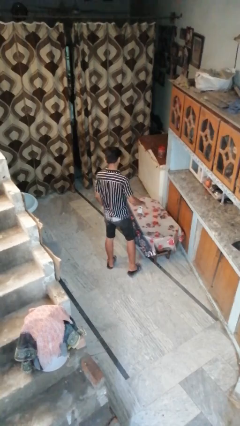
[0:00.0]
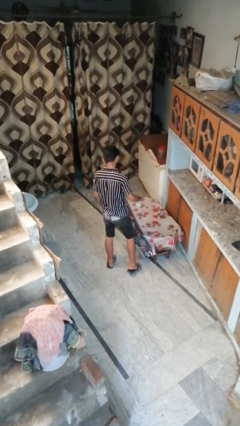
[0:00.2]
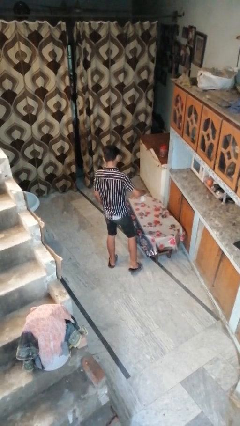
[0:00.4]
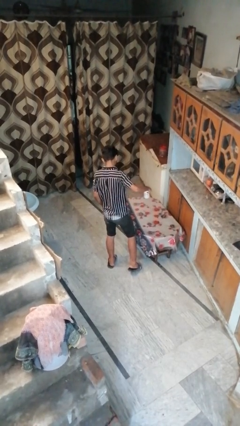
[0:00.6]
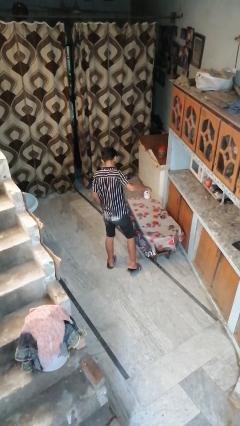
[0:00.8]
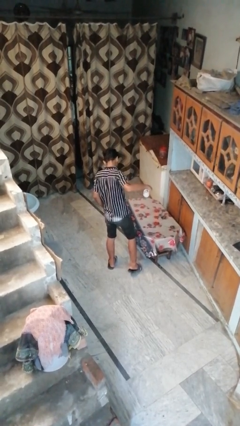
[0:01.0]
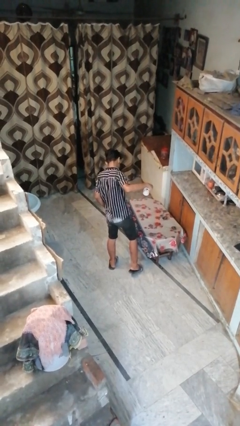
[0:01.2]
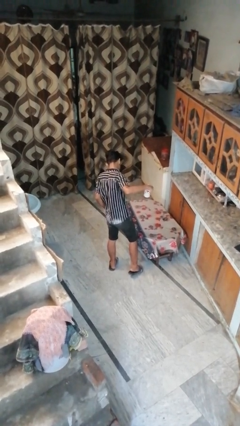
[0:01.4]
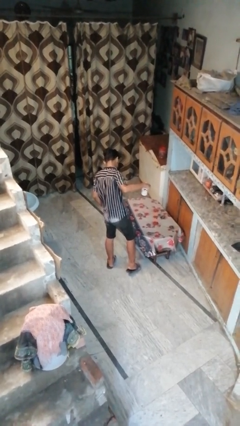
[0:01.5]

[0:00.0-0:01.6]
person sprays from bottle

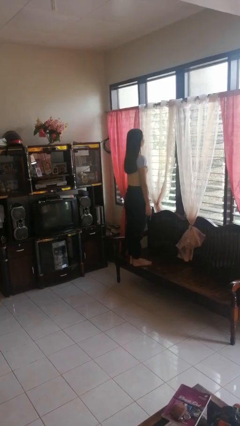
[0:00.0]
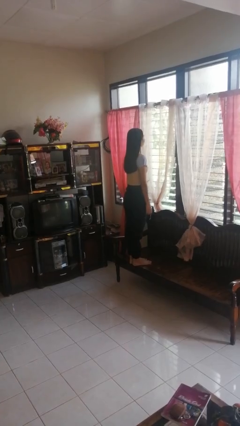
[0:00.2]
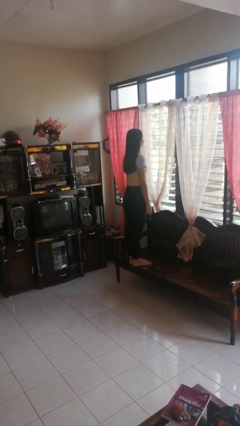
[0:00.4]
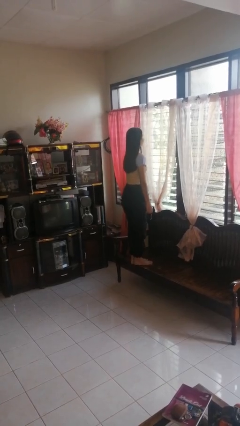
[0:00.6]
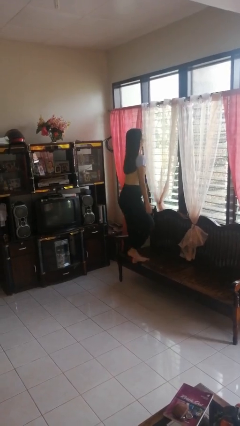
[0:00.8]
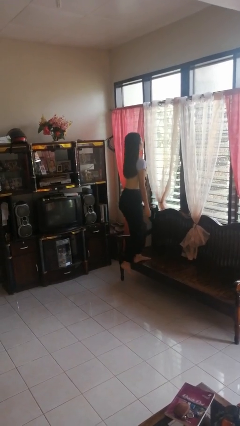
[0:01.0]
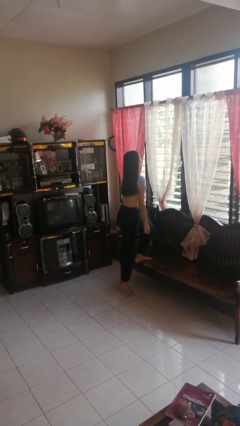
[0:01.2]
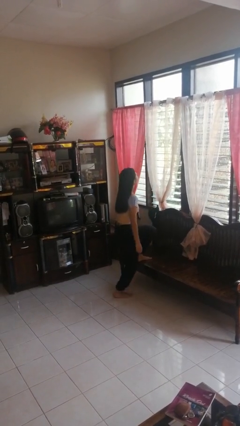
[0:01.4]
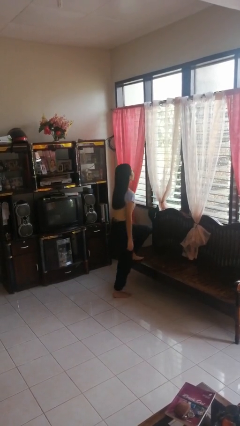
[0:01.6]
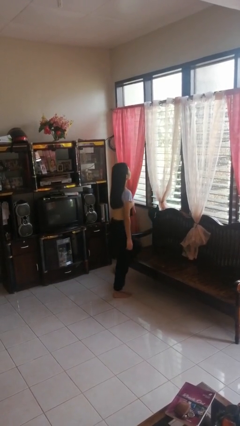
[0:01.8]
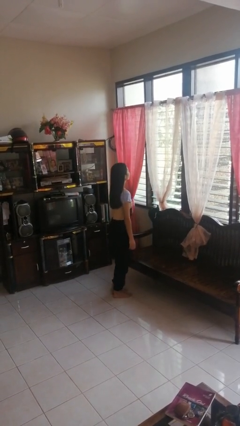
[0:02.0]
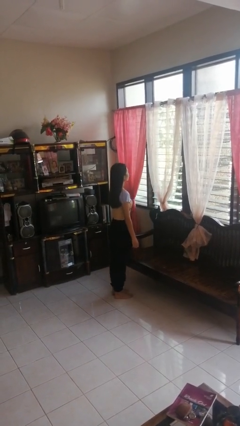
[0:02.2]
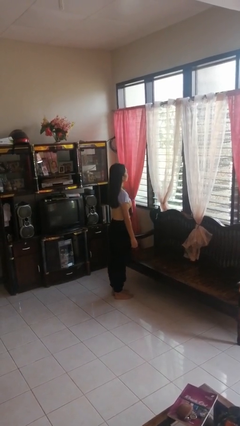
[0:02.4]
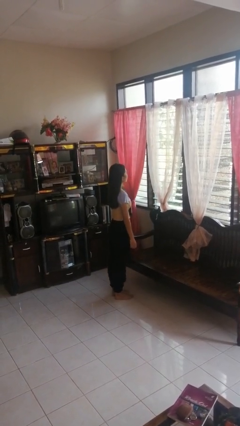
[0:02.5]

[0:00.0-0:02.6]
person climbs off couch

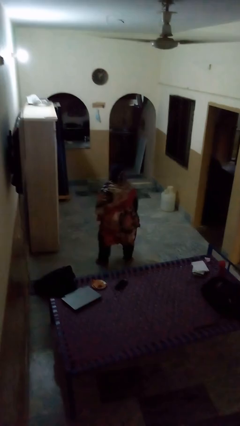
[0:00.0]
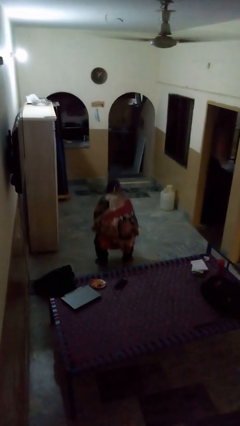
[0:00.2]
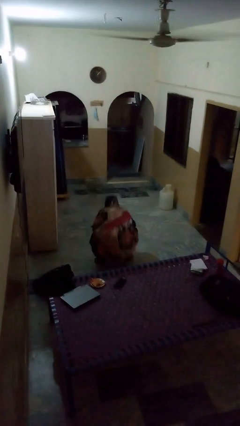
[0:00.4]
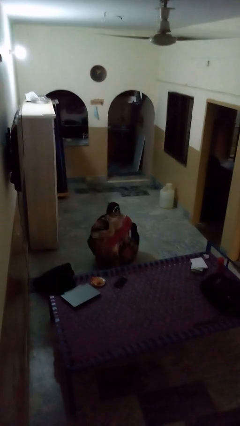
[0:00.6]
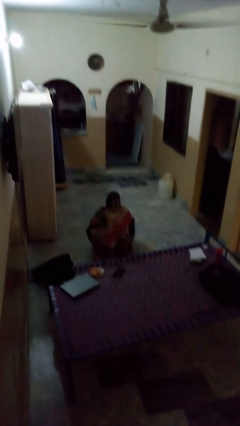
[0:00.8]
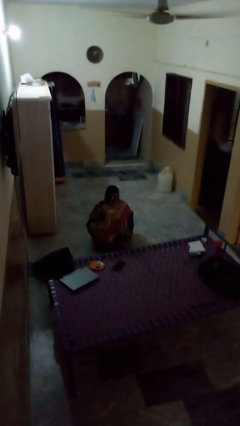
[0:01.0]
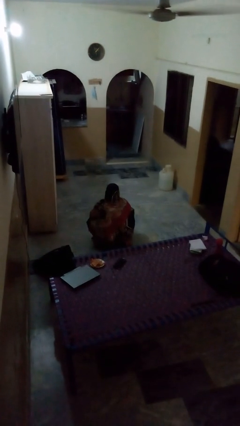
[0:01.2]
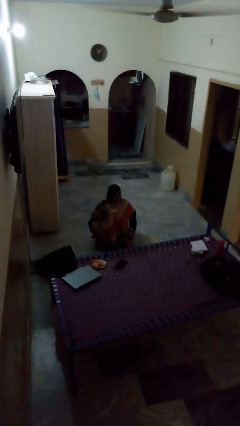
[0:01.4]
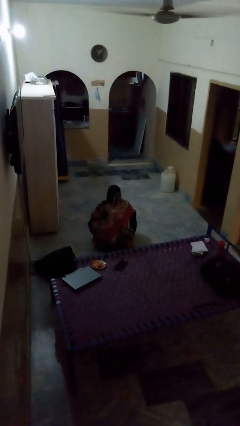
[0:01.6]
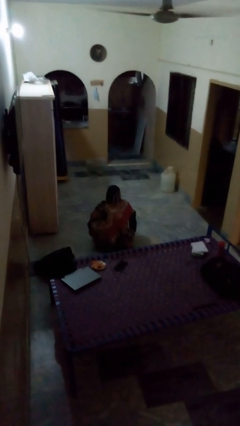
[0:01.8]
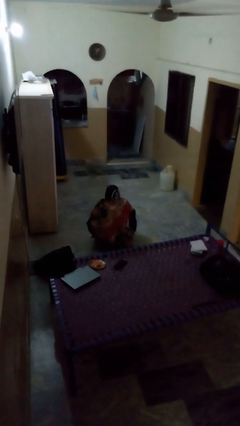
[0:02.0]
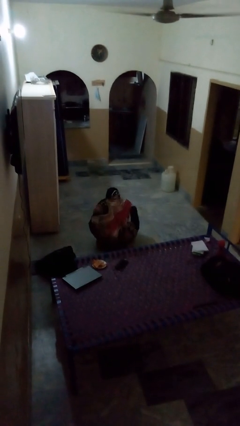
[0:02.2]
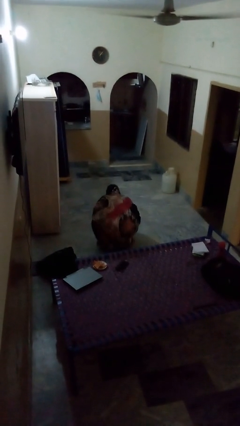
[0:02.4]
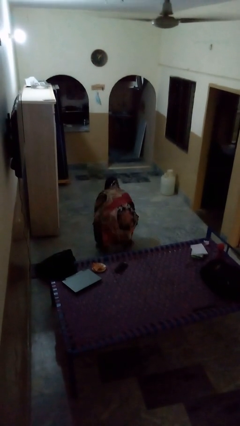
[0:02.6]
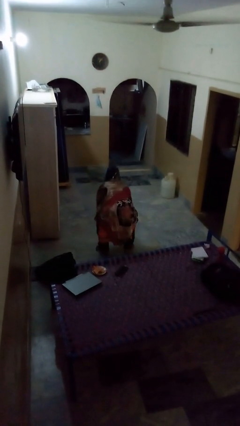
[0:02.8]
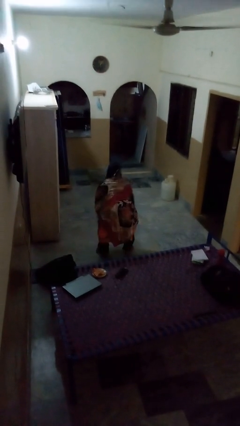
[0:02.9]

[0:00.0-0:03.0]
person squats

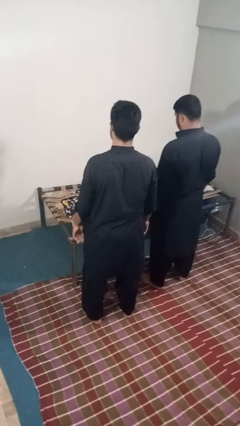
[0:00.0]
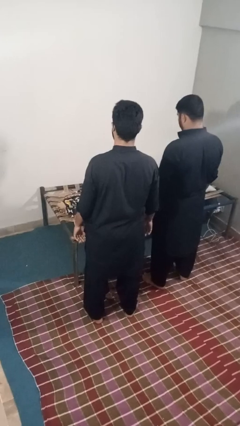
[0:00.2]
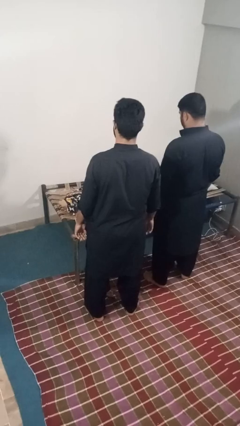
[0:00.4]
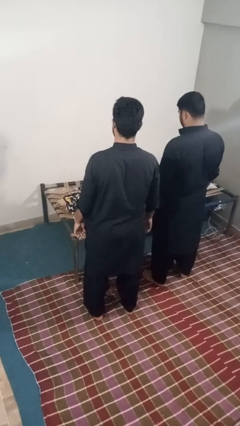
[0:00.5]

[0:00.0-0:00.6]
person nudges person with elbow

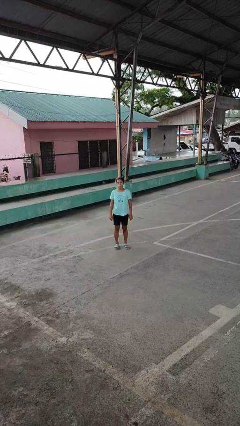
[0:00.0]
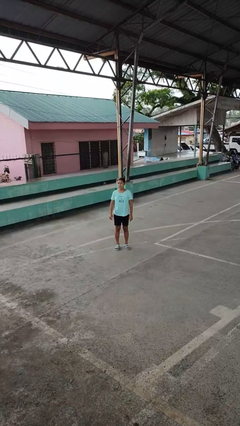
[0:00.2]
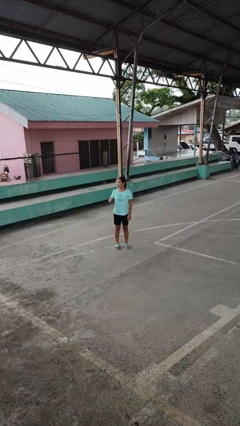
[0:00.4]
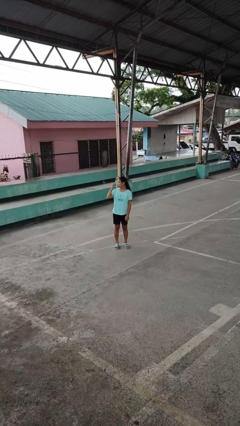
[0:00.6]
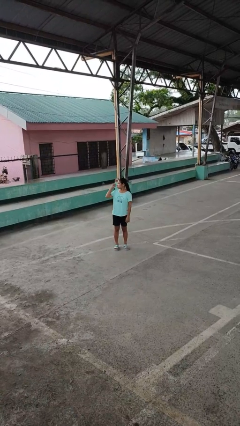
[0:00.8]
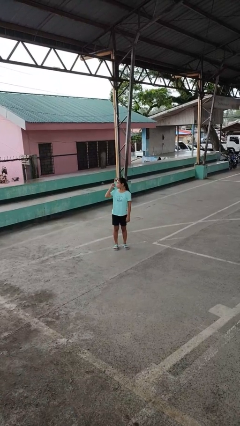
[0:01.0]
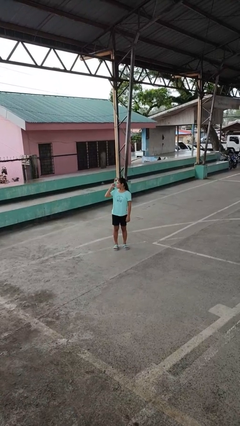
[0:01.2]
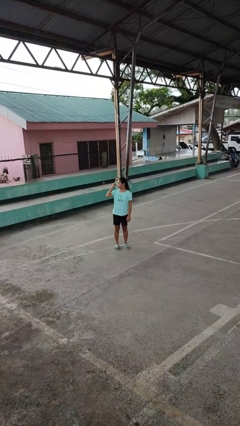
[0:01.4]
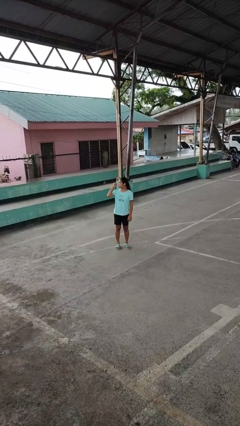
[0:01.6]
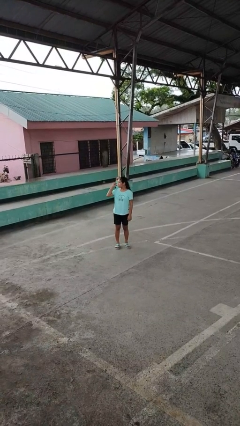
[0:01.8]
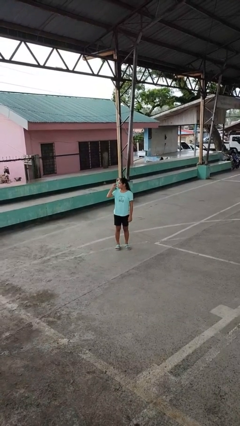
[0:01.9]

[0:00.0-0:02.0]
person gestures behind me

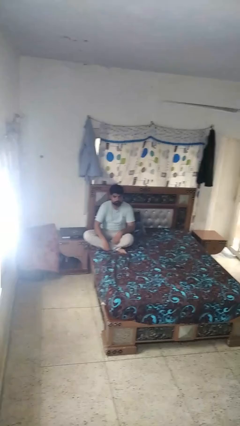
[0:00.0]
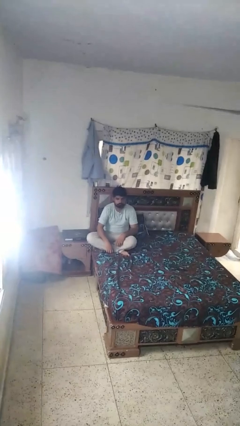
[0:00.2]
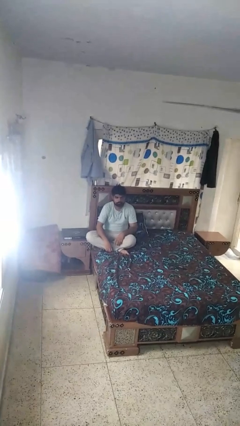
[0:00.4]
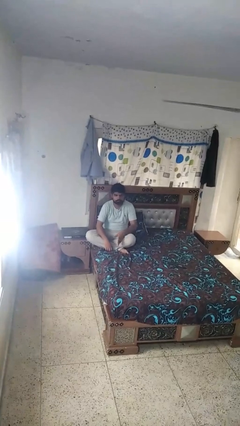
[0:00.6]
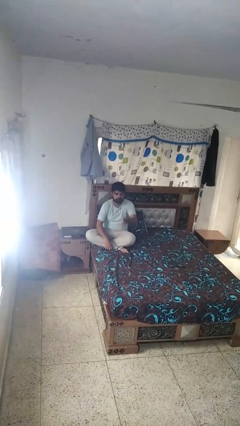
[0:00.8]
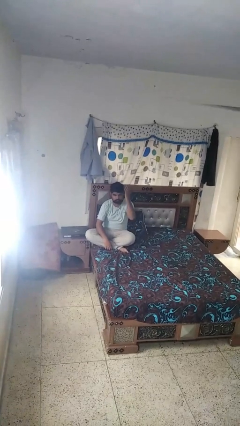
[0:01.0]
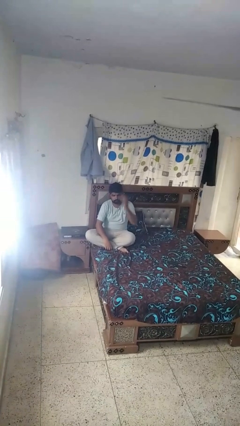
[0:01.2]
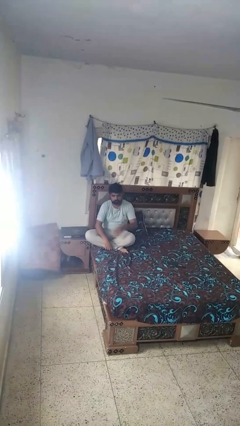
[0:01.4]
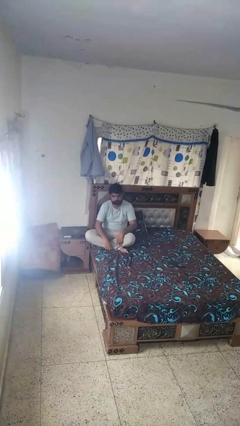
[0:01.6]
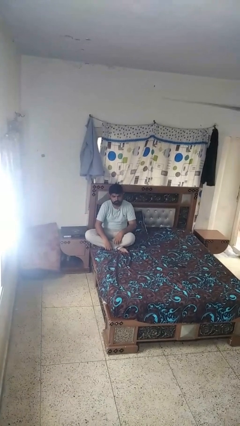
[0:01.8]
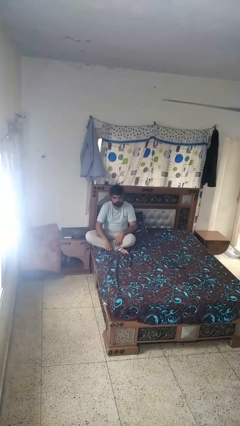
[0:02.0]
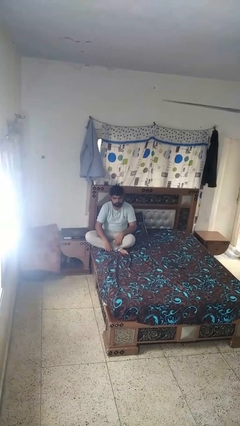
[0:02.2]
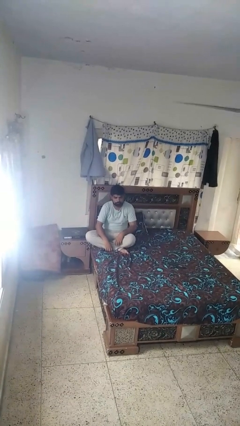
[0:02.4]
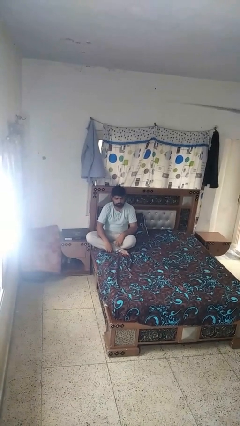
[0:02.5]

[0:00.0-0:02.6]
person gestures swipe up

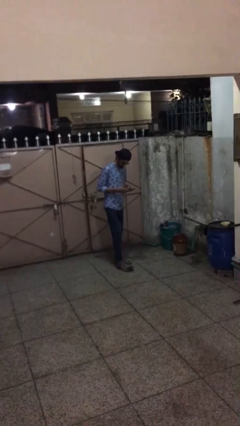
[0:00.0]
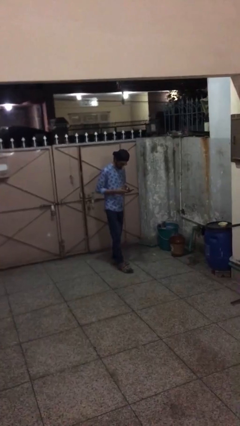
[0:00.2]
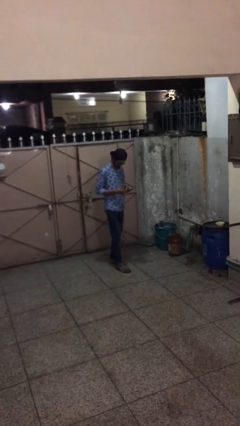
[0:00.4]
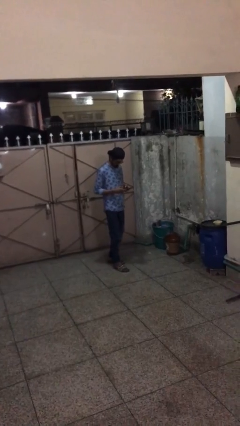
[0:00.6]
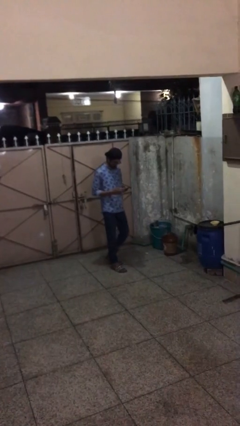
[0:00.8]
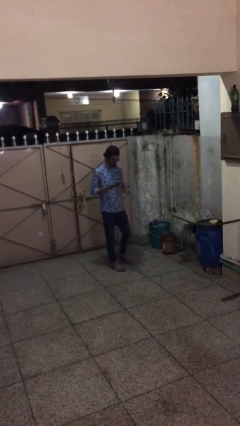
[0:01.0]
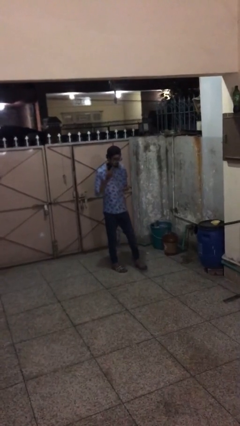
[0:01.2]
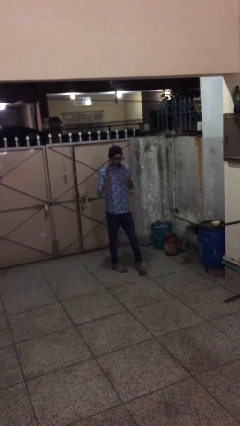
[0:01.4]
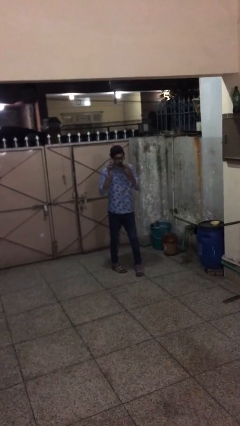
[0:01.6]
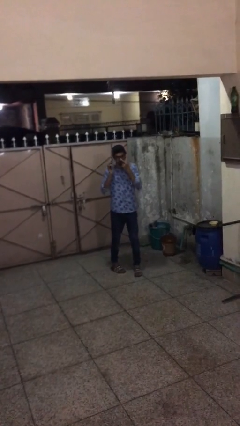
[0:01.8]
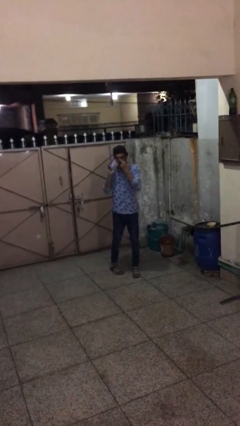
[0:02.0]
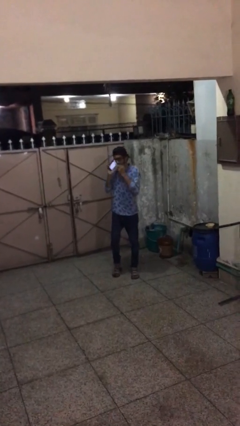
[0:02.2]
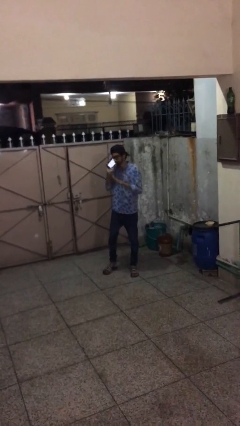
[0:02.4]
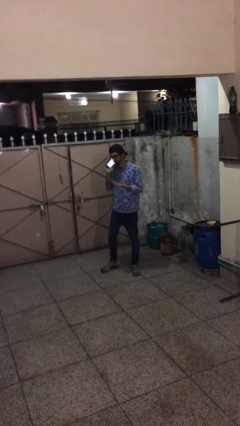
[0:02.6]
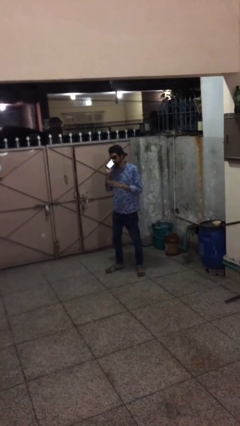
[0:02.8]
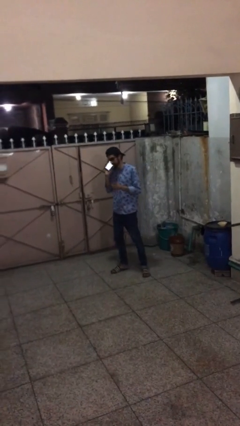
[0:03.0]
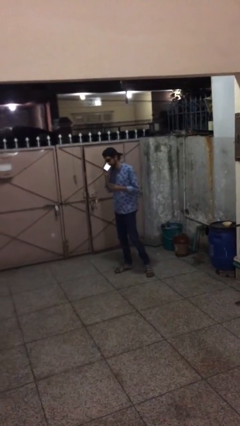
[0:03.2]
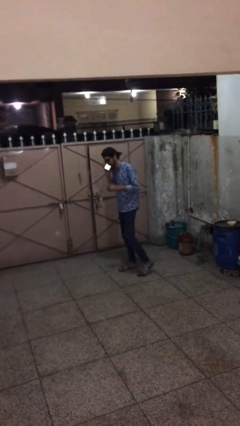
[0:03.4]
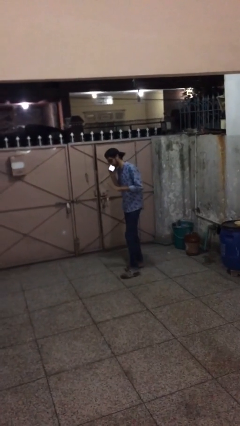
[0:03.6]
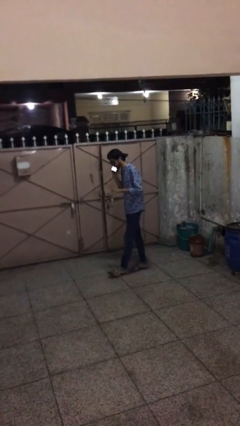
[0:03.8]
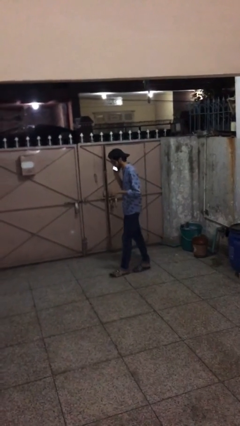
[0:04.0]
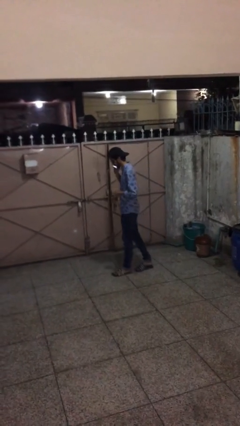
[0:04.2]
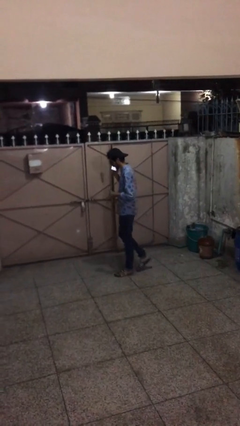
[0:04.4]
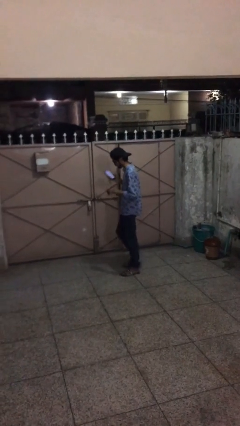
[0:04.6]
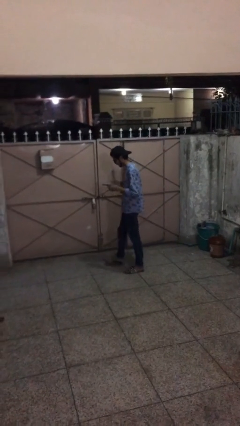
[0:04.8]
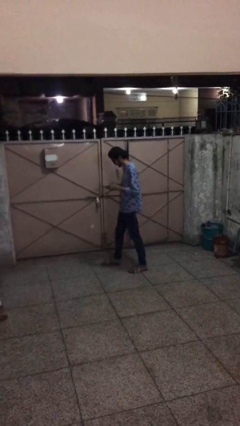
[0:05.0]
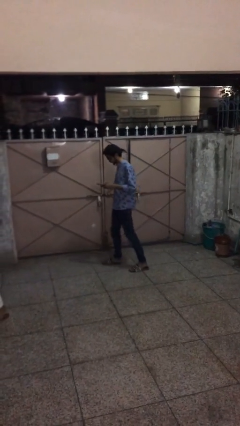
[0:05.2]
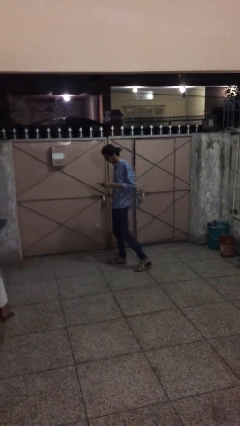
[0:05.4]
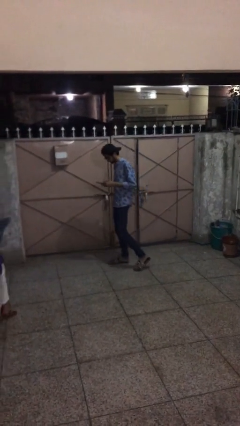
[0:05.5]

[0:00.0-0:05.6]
person talks on phone
